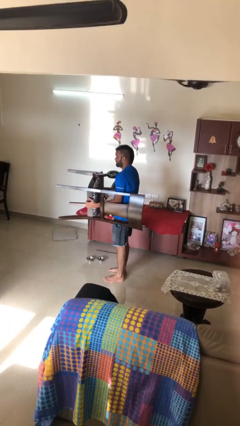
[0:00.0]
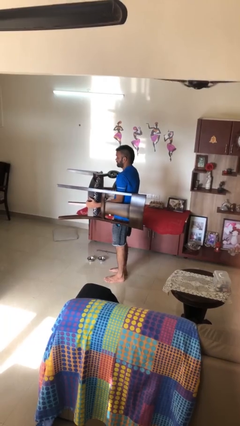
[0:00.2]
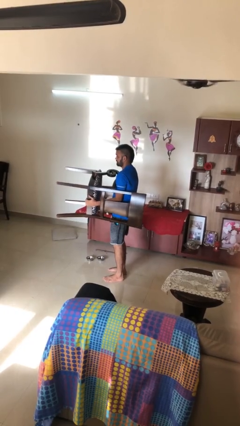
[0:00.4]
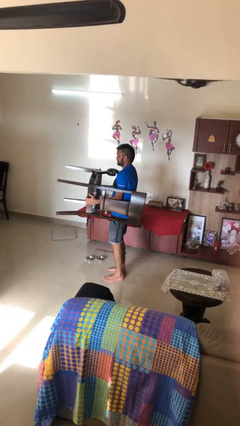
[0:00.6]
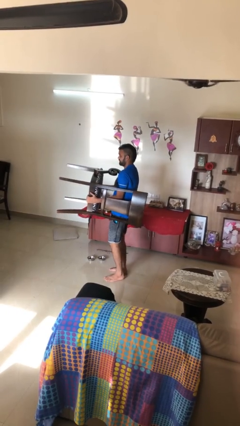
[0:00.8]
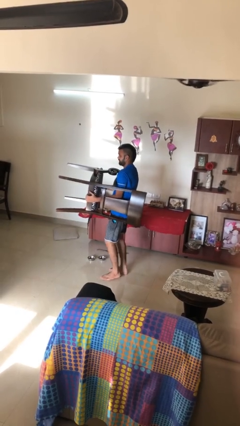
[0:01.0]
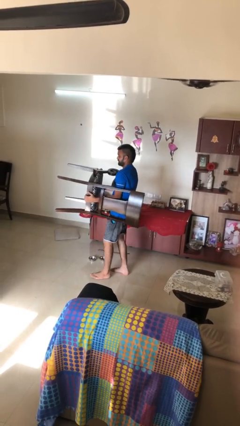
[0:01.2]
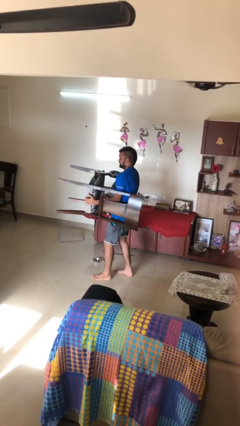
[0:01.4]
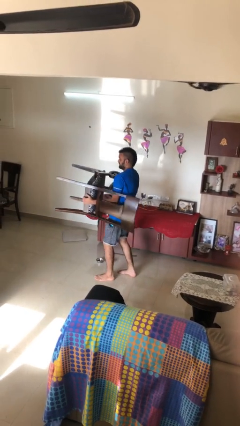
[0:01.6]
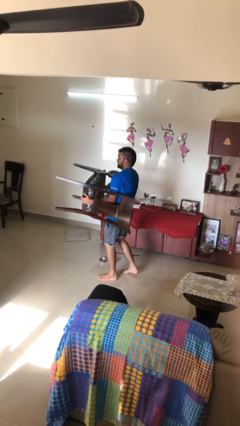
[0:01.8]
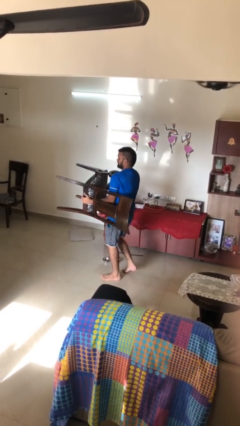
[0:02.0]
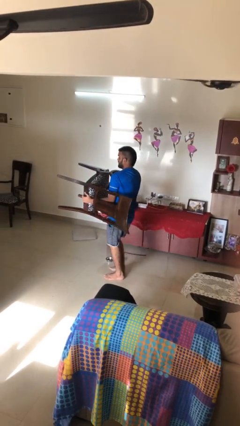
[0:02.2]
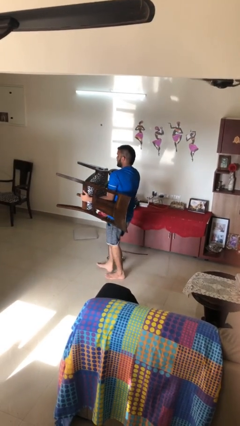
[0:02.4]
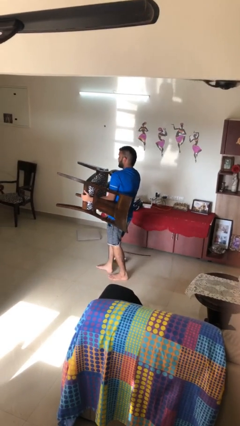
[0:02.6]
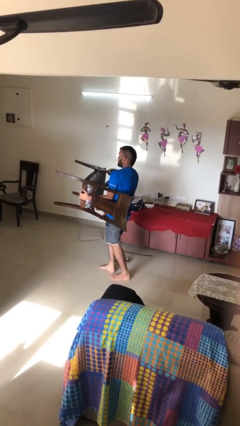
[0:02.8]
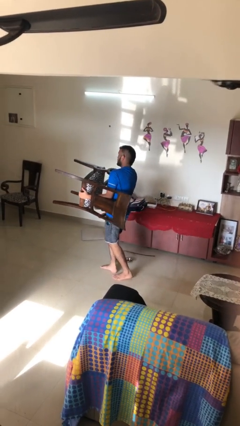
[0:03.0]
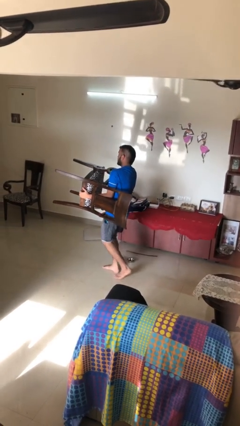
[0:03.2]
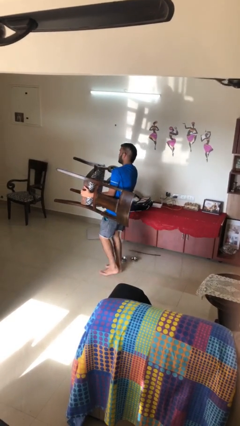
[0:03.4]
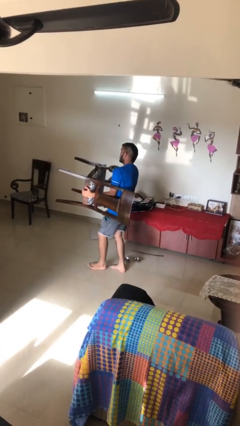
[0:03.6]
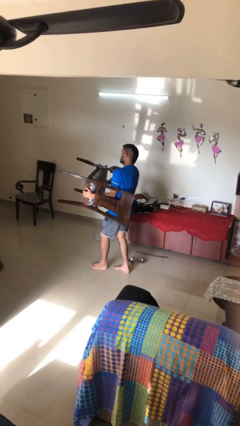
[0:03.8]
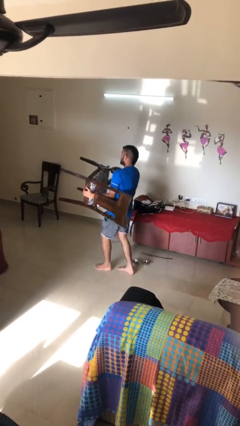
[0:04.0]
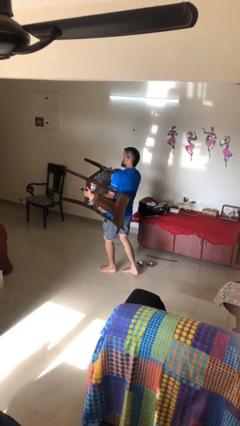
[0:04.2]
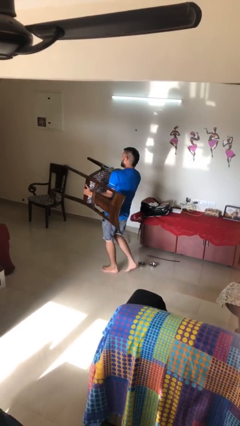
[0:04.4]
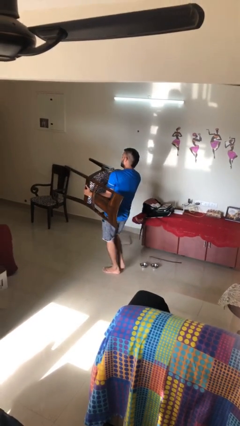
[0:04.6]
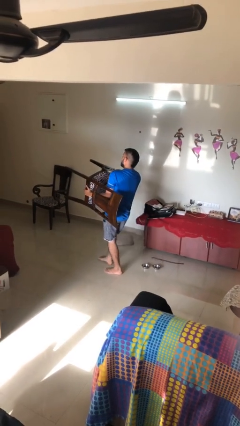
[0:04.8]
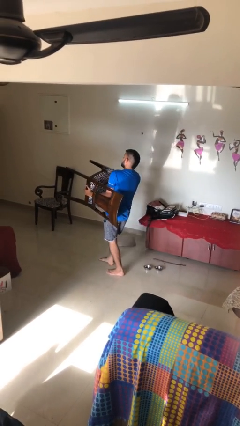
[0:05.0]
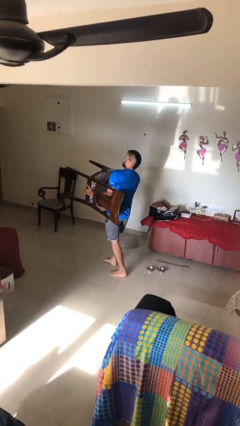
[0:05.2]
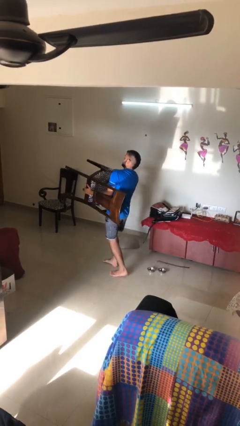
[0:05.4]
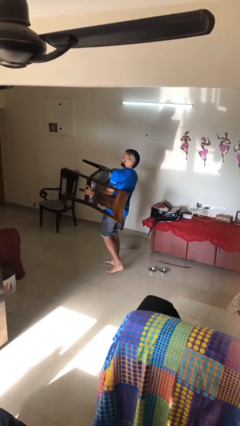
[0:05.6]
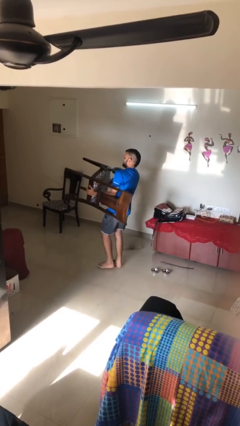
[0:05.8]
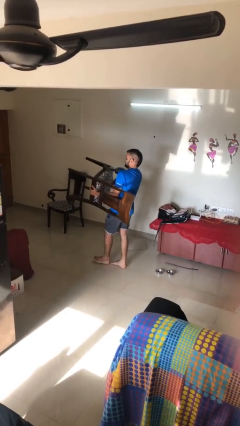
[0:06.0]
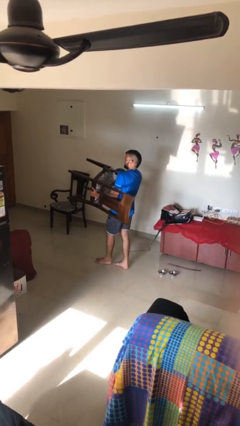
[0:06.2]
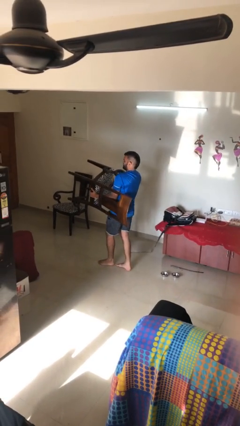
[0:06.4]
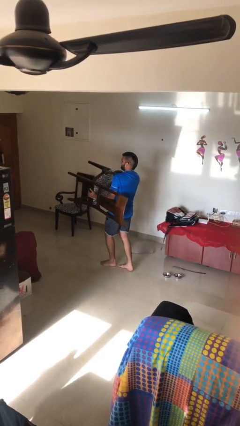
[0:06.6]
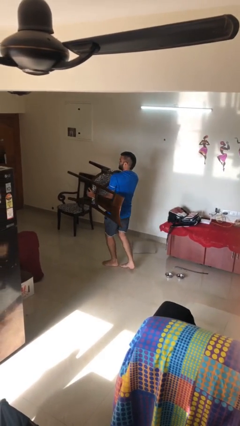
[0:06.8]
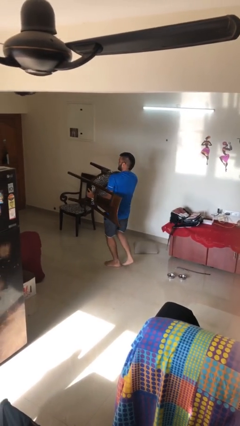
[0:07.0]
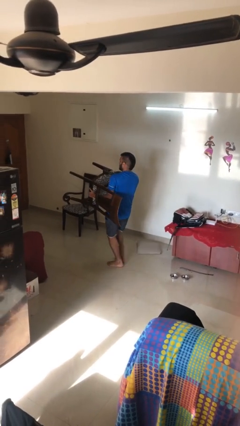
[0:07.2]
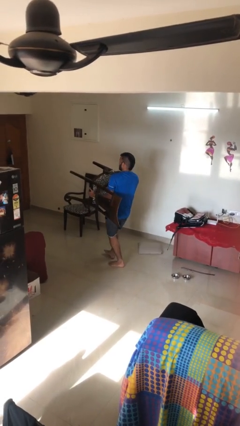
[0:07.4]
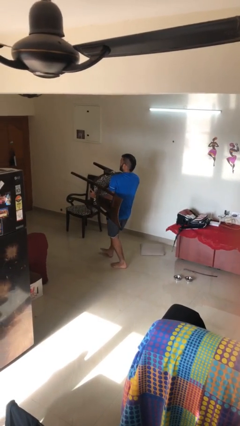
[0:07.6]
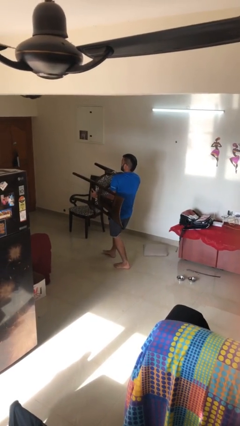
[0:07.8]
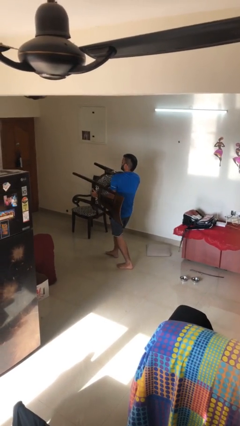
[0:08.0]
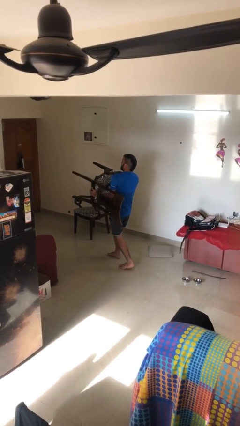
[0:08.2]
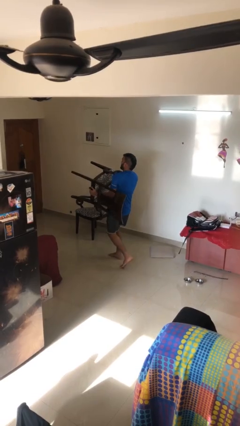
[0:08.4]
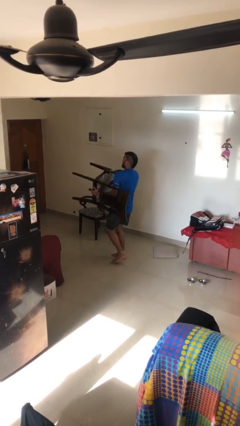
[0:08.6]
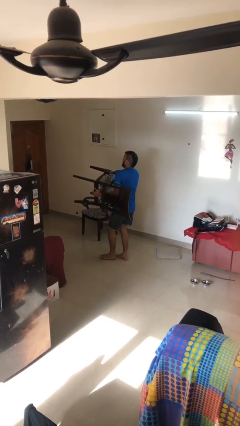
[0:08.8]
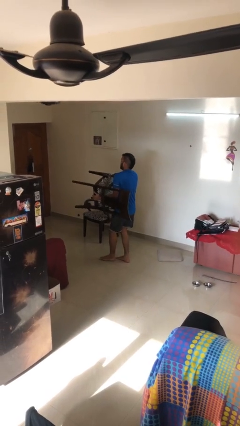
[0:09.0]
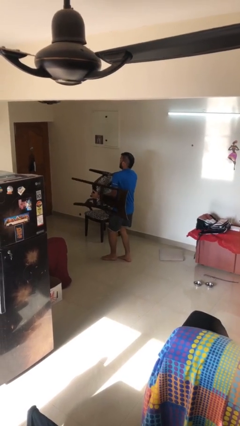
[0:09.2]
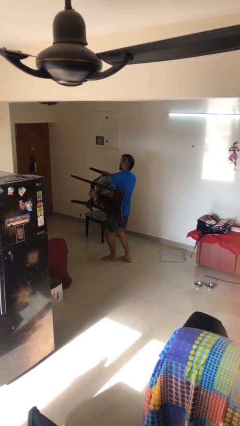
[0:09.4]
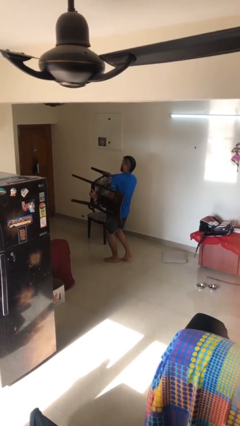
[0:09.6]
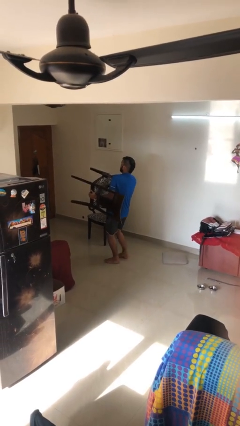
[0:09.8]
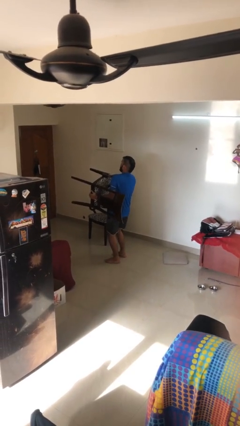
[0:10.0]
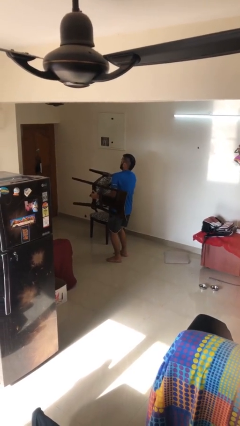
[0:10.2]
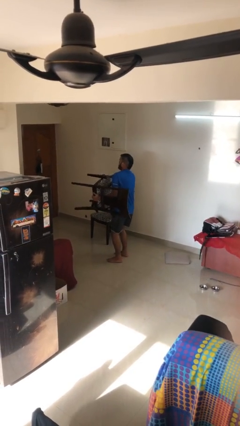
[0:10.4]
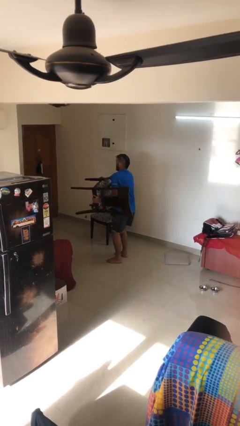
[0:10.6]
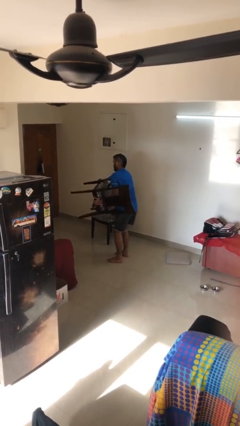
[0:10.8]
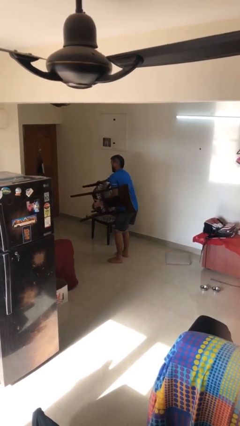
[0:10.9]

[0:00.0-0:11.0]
person carries heavy object

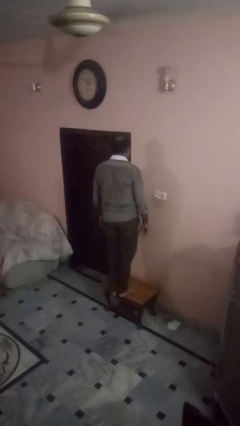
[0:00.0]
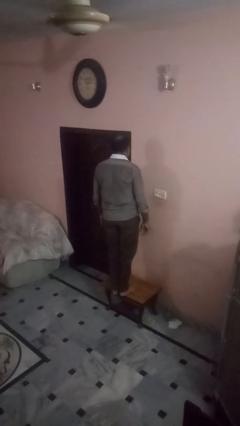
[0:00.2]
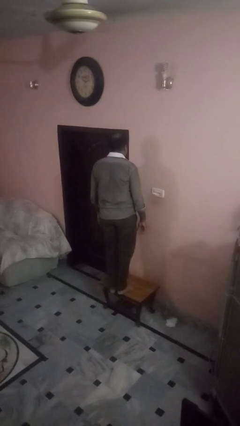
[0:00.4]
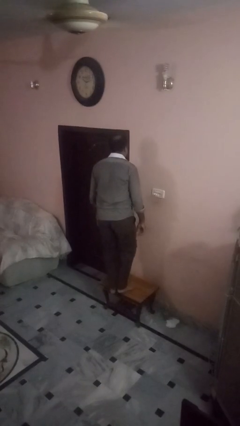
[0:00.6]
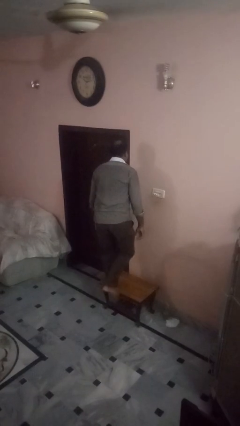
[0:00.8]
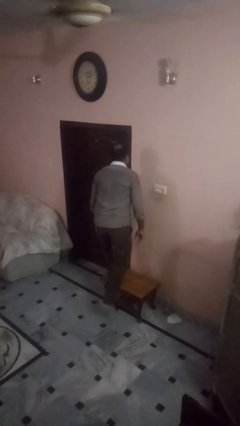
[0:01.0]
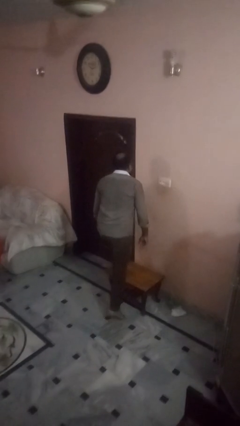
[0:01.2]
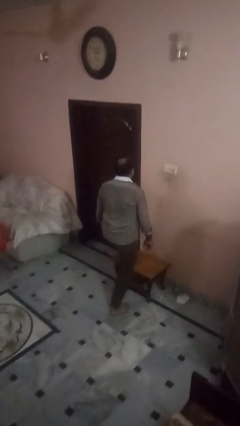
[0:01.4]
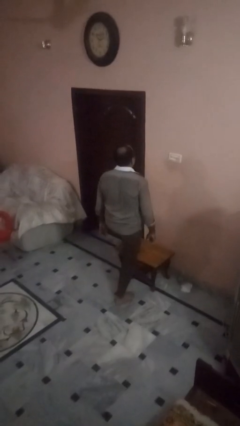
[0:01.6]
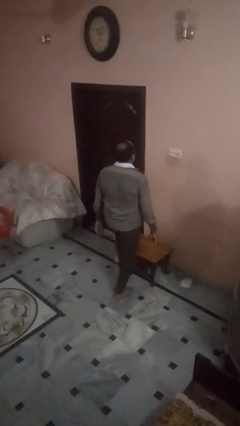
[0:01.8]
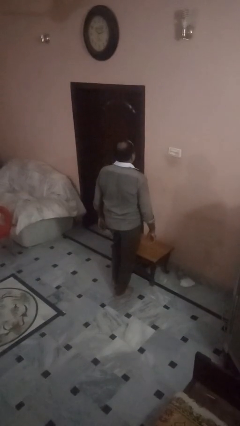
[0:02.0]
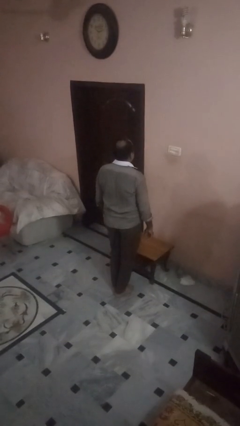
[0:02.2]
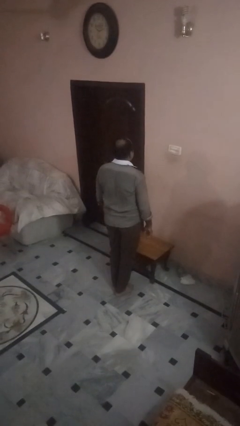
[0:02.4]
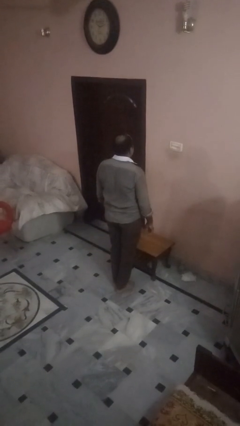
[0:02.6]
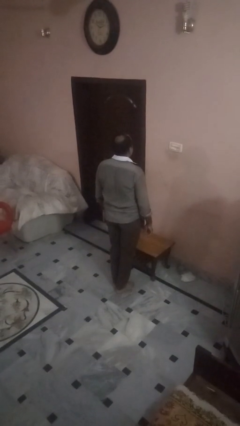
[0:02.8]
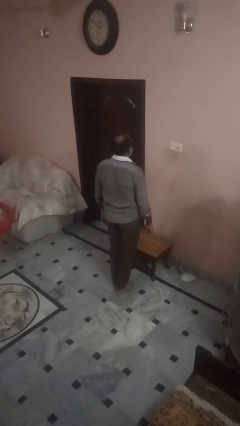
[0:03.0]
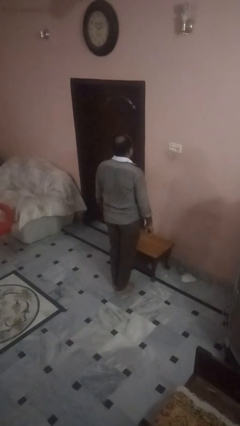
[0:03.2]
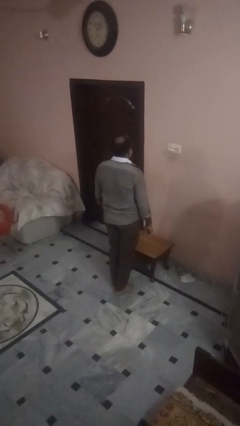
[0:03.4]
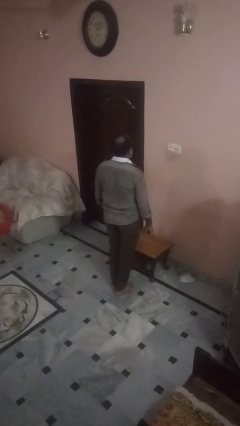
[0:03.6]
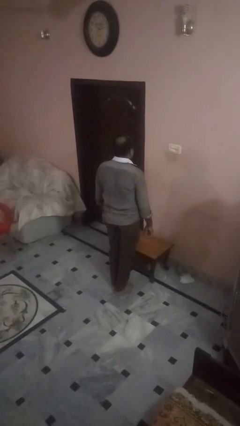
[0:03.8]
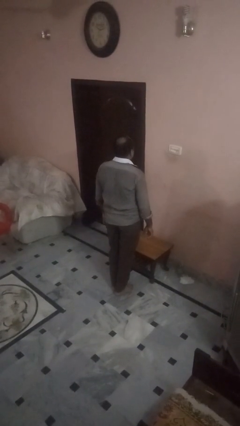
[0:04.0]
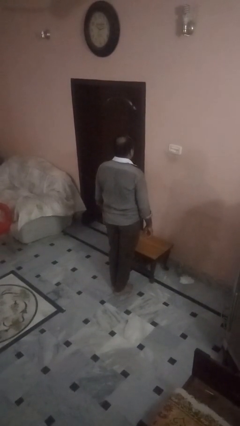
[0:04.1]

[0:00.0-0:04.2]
person climbs off table

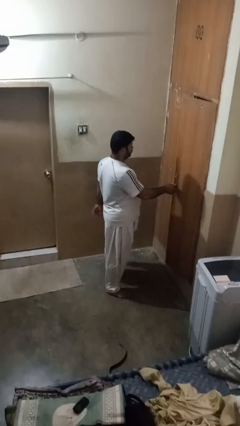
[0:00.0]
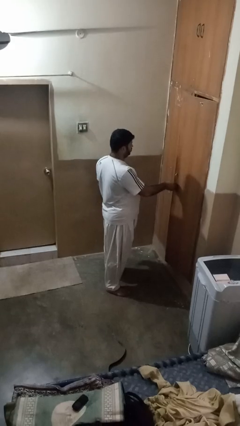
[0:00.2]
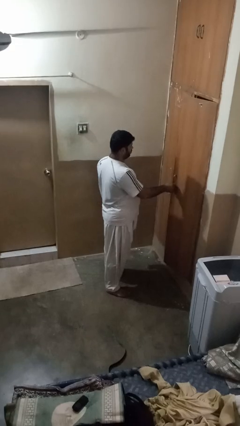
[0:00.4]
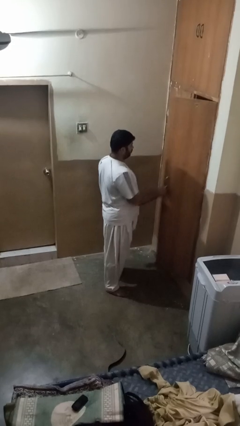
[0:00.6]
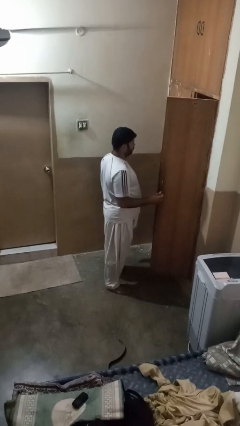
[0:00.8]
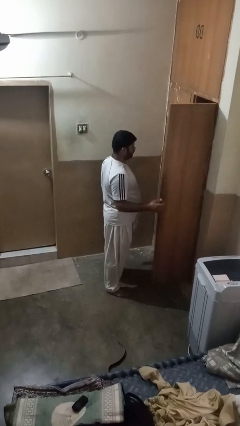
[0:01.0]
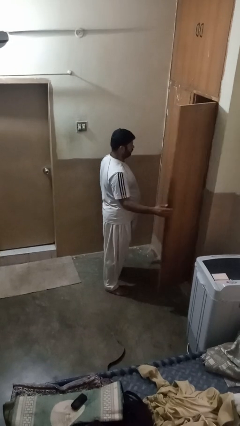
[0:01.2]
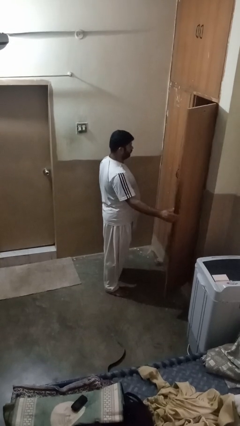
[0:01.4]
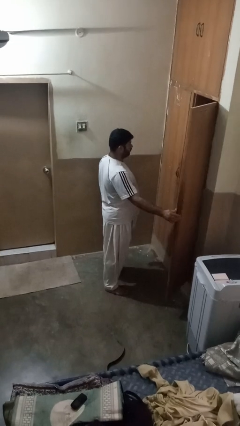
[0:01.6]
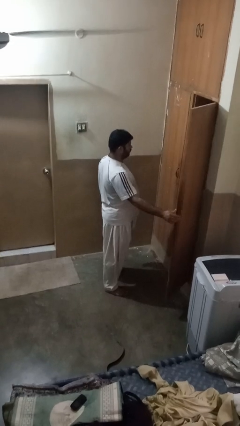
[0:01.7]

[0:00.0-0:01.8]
person opens closet door

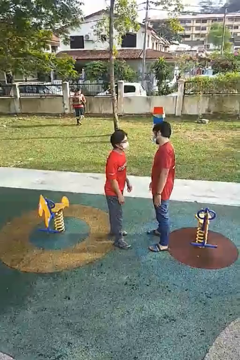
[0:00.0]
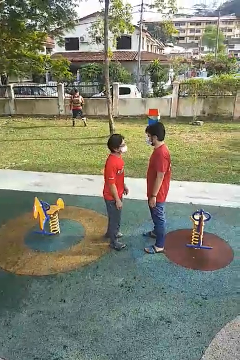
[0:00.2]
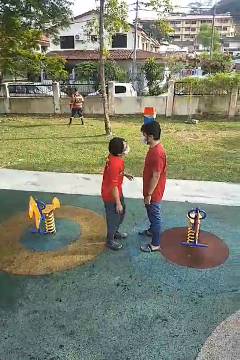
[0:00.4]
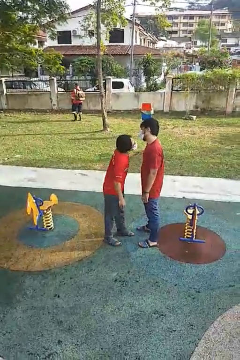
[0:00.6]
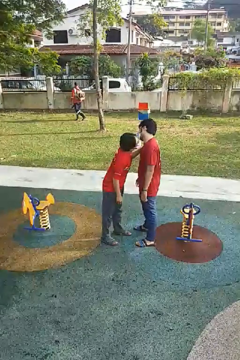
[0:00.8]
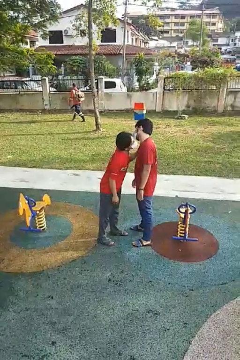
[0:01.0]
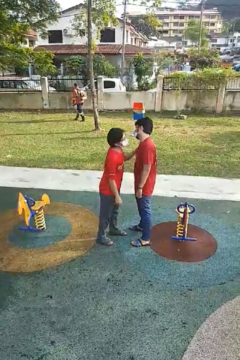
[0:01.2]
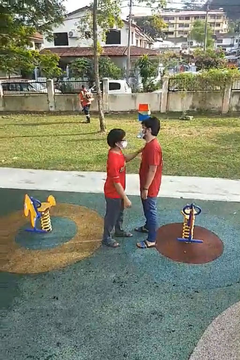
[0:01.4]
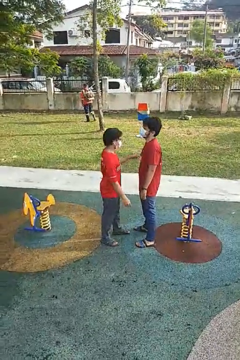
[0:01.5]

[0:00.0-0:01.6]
person kisses cheek of person
